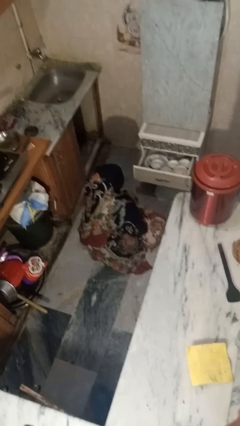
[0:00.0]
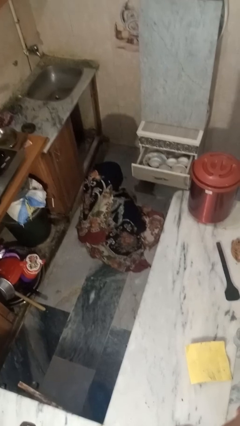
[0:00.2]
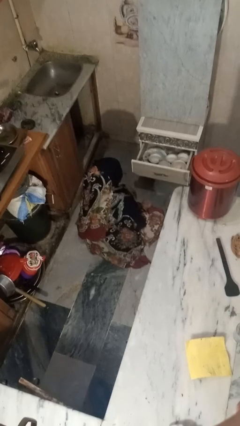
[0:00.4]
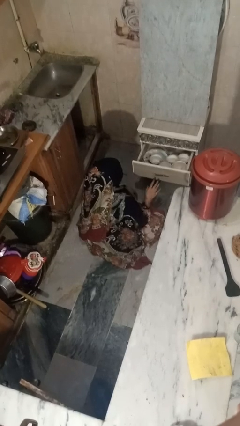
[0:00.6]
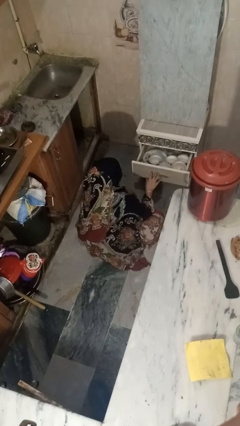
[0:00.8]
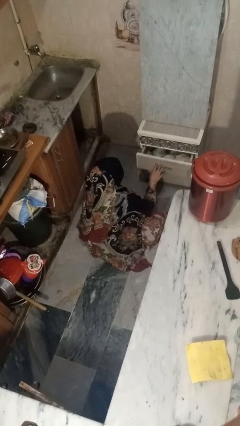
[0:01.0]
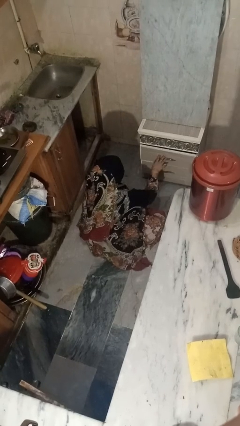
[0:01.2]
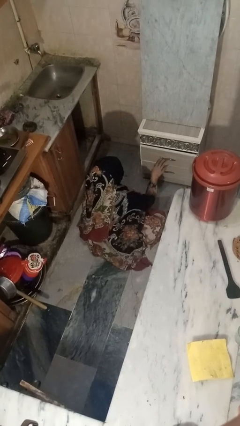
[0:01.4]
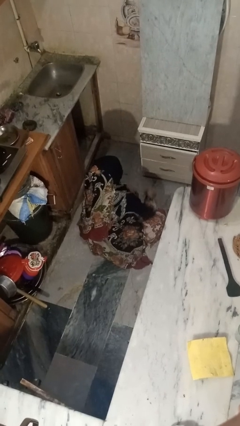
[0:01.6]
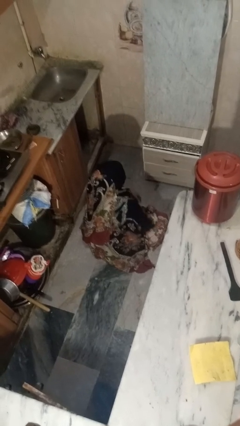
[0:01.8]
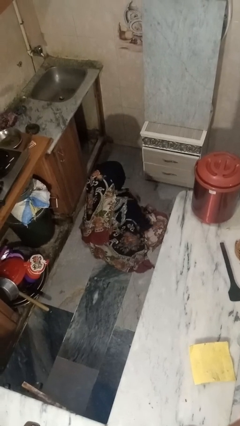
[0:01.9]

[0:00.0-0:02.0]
person closes kitchen drawer

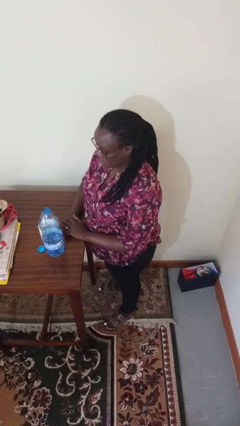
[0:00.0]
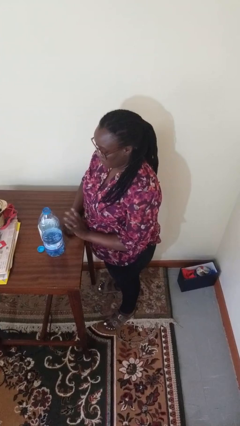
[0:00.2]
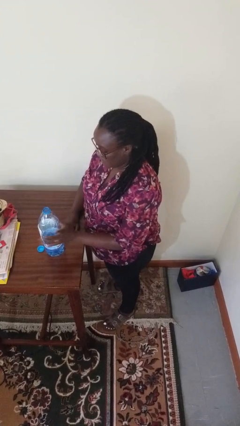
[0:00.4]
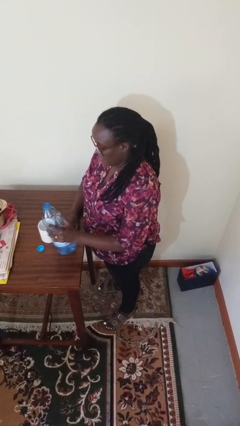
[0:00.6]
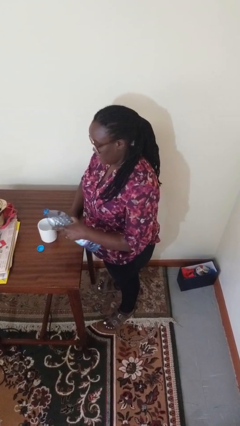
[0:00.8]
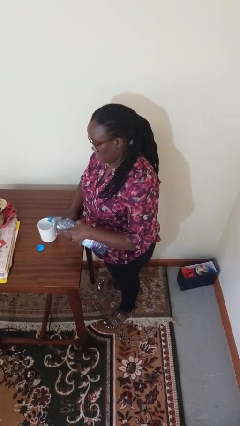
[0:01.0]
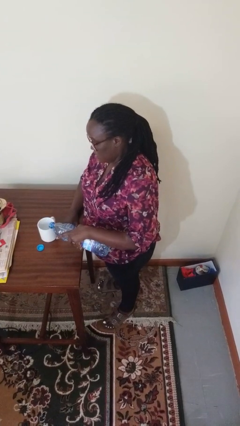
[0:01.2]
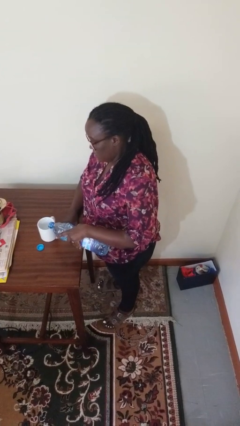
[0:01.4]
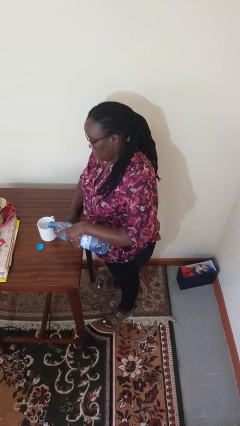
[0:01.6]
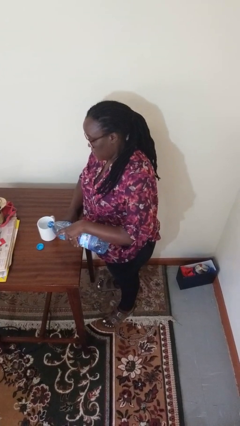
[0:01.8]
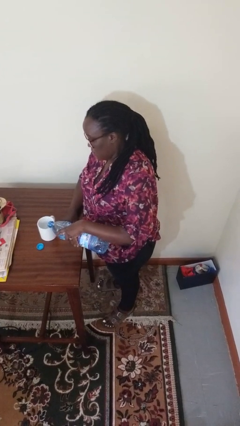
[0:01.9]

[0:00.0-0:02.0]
person pours liquid into cup

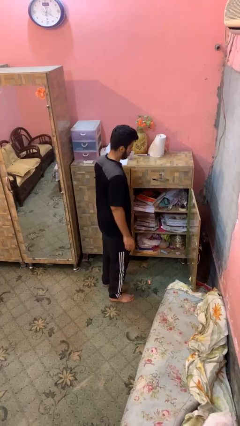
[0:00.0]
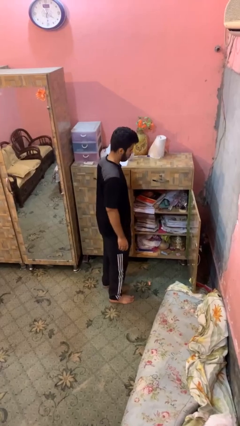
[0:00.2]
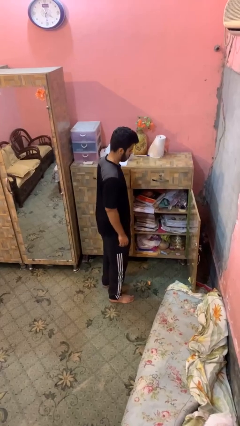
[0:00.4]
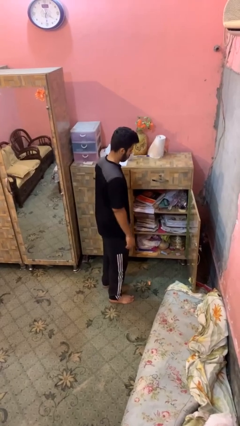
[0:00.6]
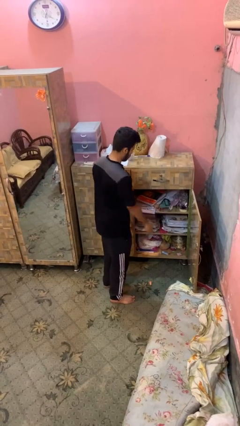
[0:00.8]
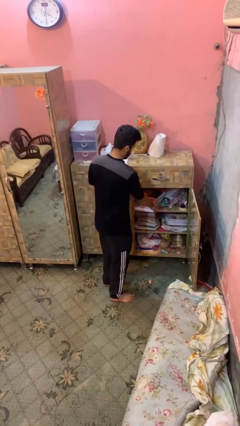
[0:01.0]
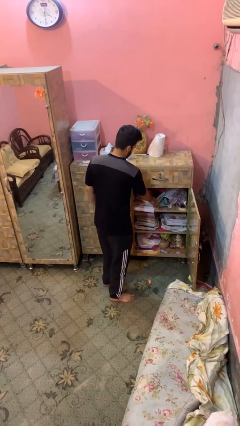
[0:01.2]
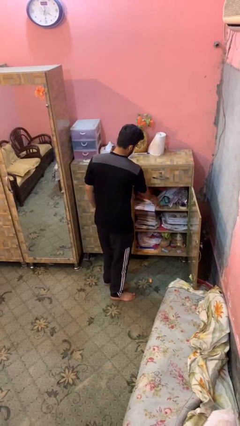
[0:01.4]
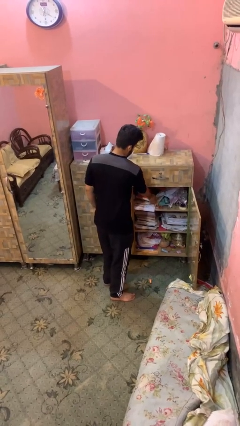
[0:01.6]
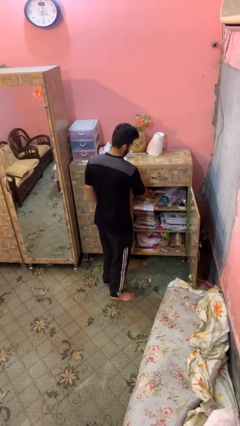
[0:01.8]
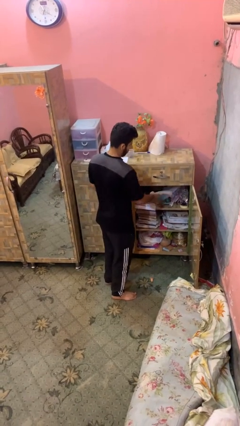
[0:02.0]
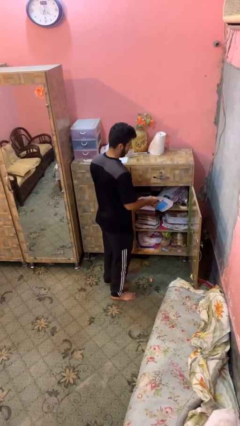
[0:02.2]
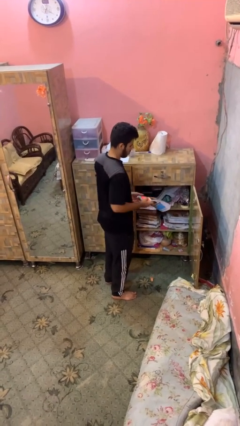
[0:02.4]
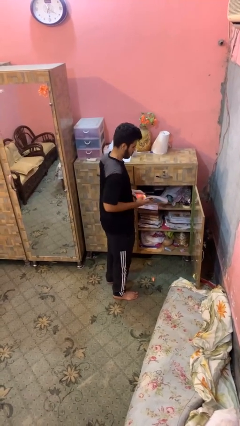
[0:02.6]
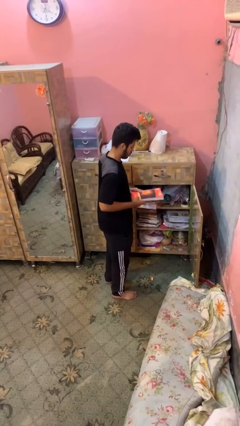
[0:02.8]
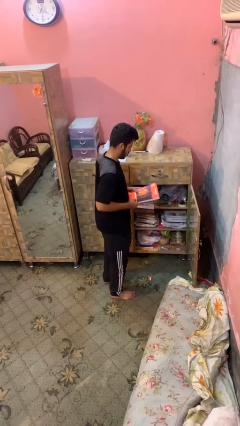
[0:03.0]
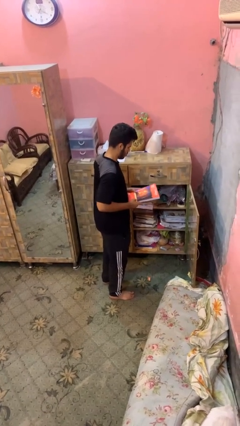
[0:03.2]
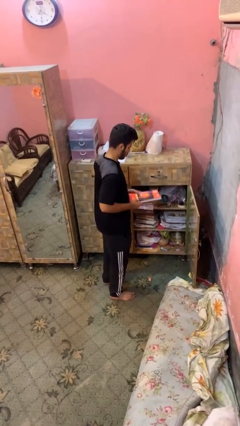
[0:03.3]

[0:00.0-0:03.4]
person picks up object from cabinet

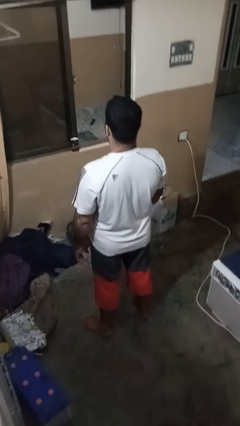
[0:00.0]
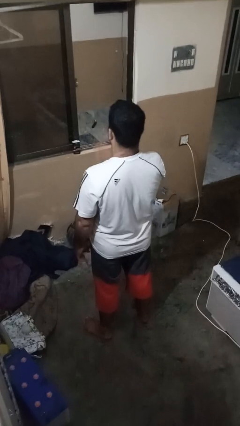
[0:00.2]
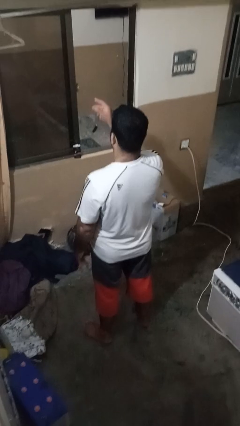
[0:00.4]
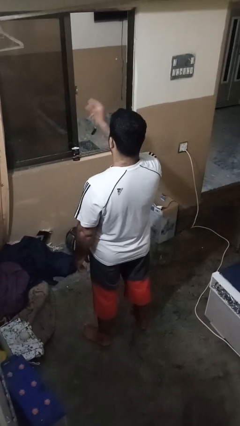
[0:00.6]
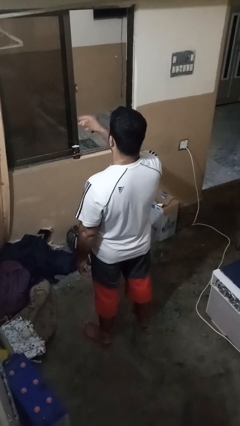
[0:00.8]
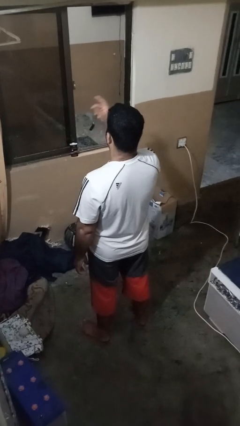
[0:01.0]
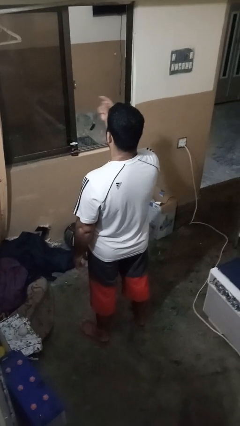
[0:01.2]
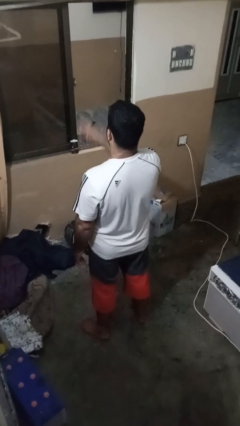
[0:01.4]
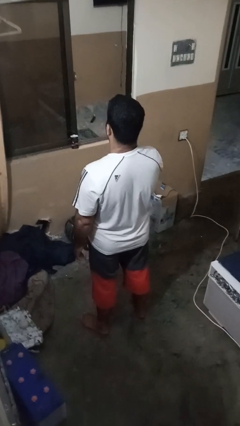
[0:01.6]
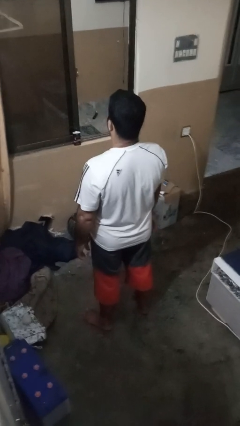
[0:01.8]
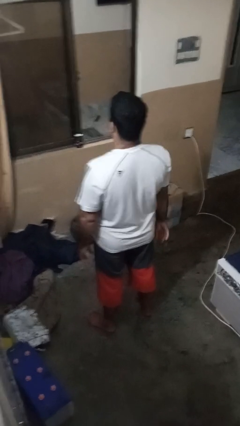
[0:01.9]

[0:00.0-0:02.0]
person snaps fingers

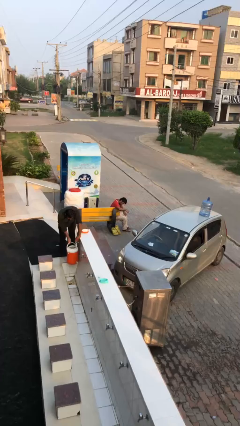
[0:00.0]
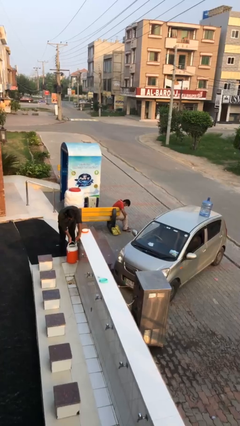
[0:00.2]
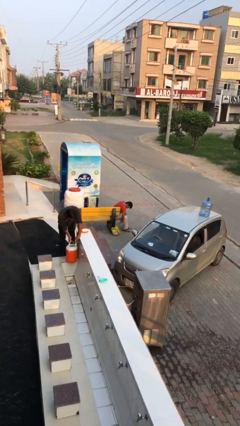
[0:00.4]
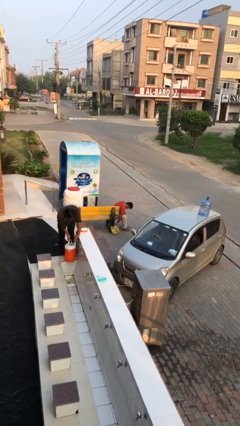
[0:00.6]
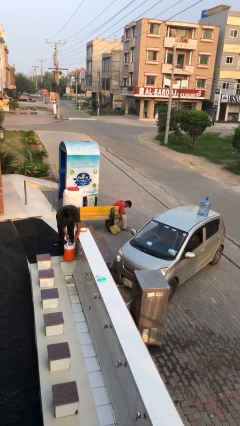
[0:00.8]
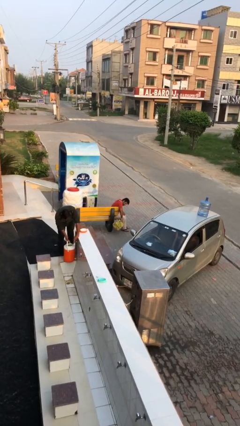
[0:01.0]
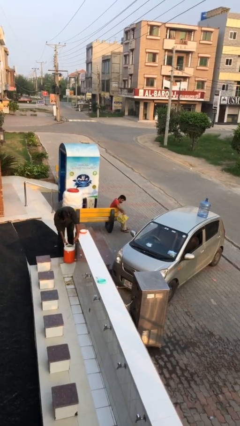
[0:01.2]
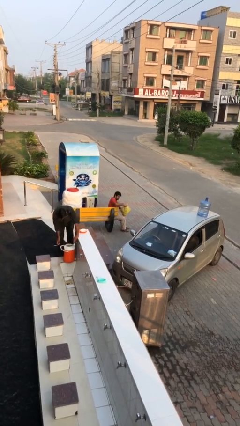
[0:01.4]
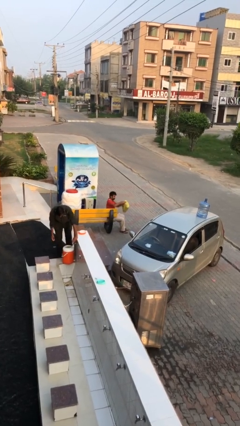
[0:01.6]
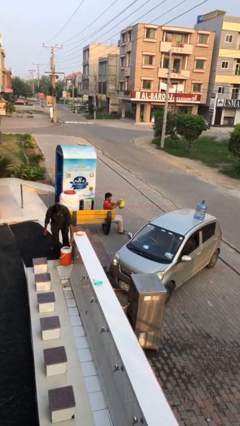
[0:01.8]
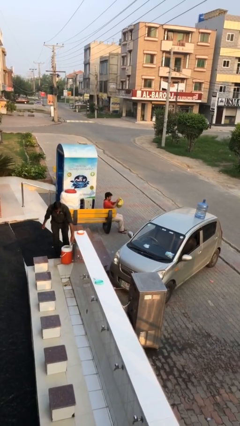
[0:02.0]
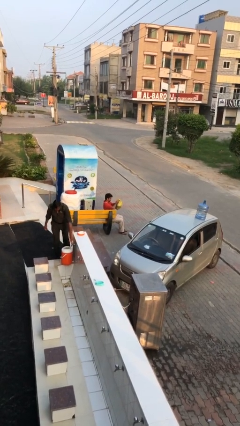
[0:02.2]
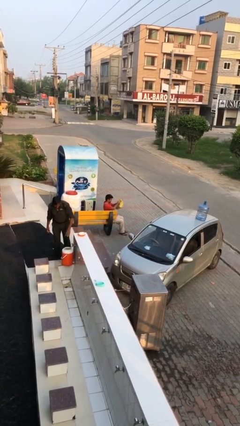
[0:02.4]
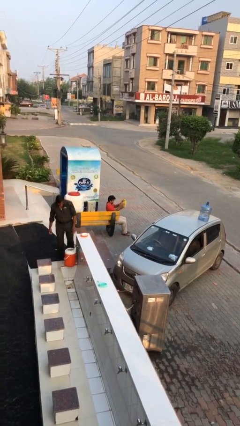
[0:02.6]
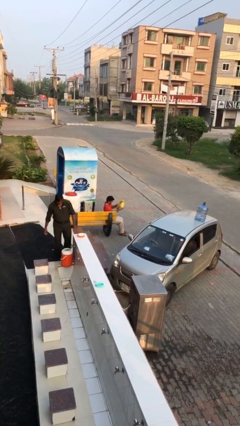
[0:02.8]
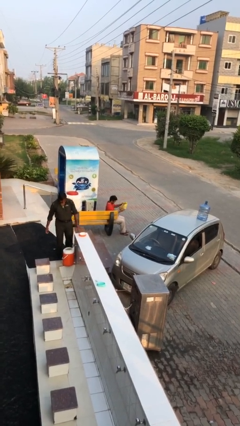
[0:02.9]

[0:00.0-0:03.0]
person picks up object from floor

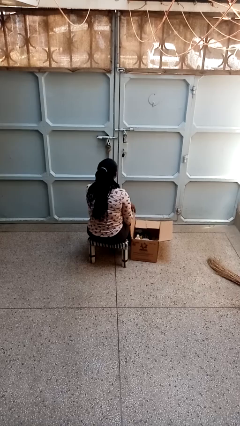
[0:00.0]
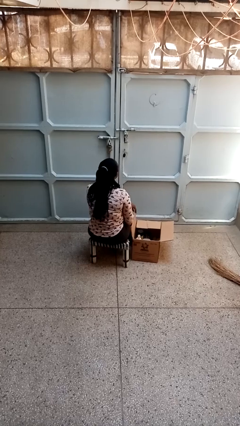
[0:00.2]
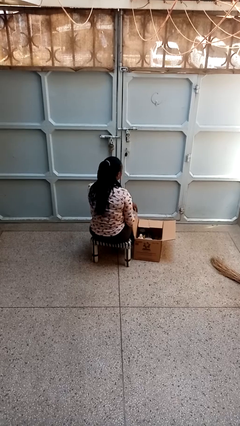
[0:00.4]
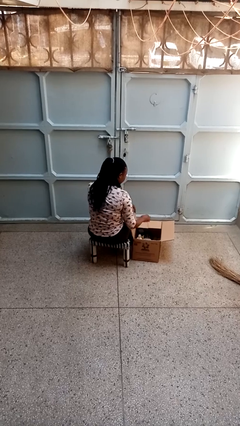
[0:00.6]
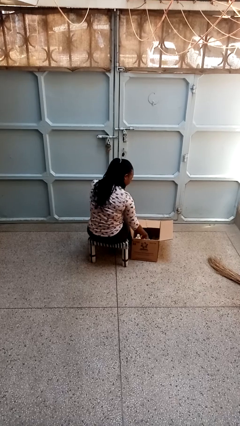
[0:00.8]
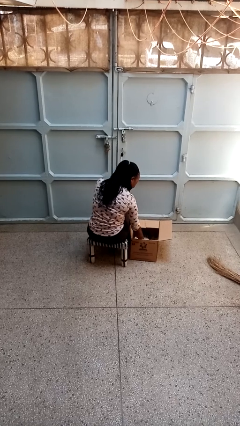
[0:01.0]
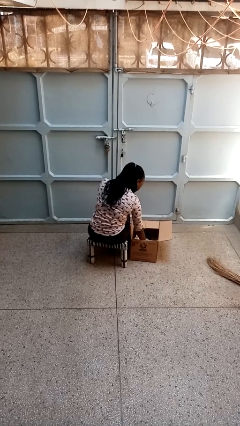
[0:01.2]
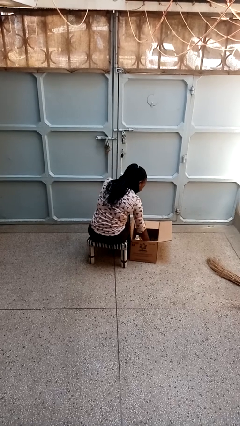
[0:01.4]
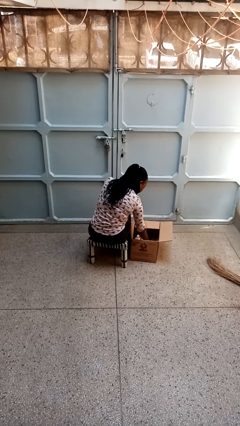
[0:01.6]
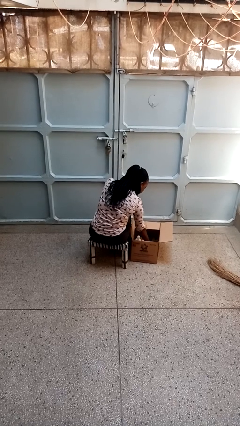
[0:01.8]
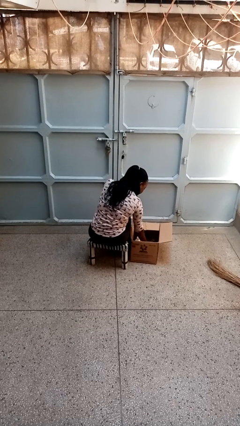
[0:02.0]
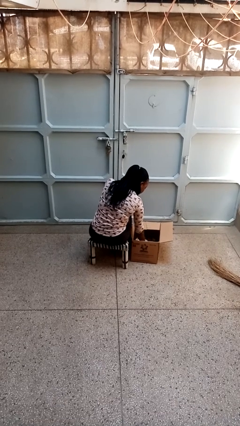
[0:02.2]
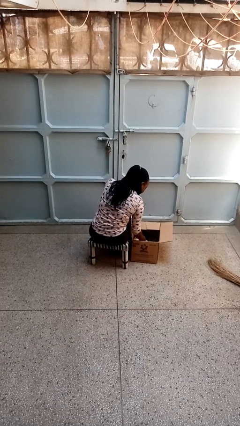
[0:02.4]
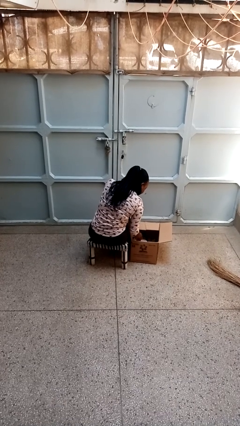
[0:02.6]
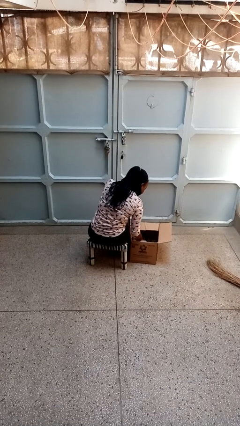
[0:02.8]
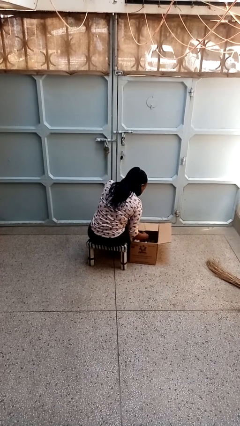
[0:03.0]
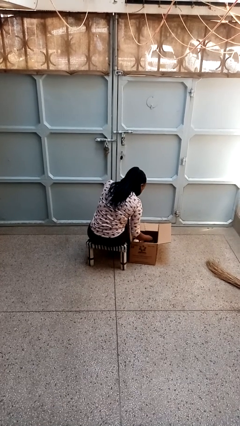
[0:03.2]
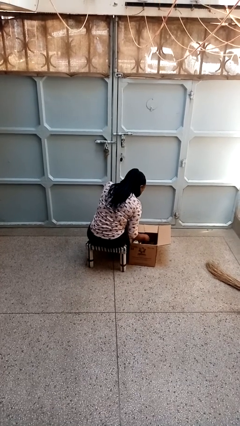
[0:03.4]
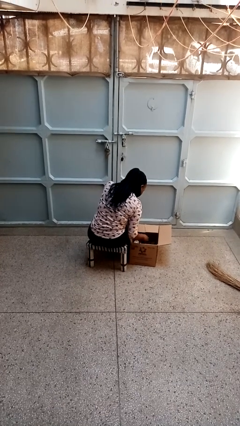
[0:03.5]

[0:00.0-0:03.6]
person searches in box

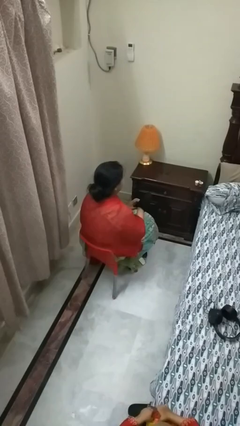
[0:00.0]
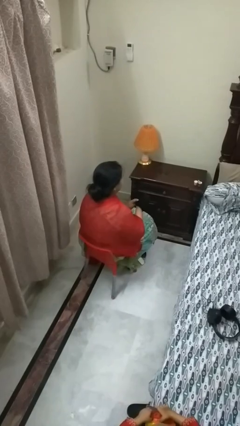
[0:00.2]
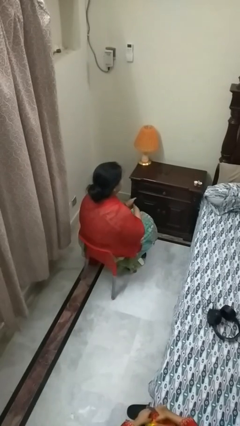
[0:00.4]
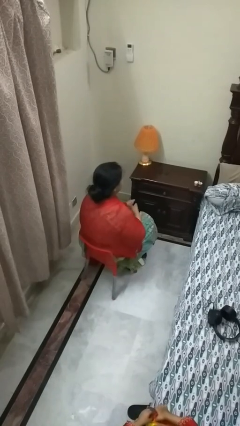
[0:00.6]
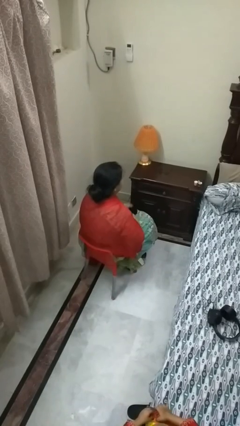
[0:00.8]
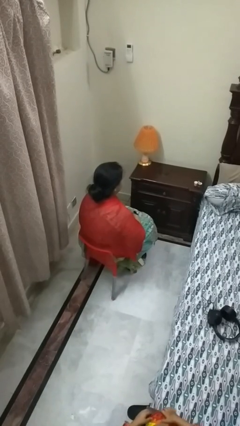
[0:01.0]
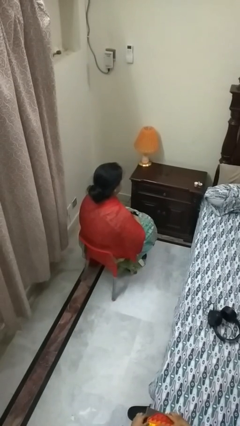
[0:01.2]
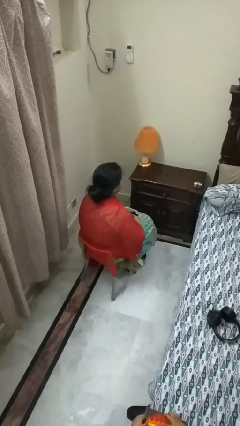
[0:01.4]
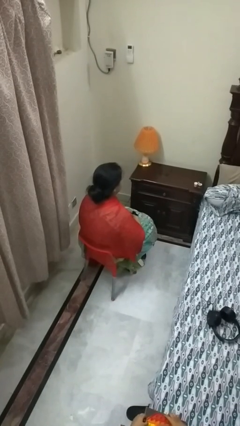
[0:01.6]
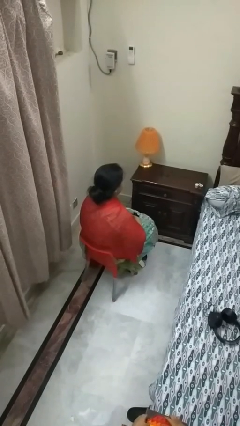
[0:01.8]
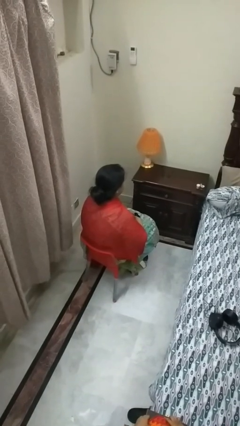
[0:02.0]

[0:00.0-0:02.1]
person takes off gloves
